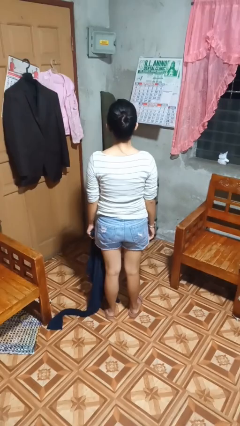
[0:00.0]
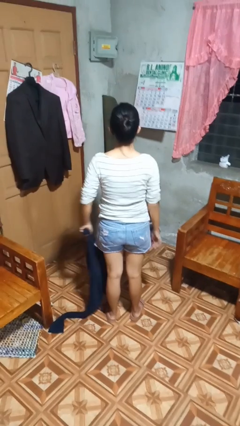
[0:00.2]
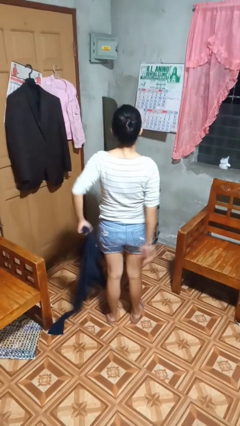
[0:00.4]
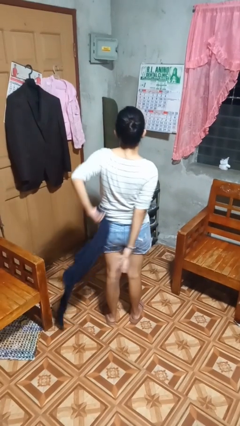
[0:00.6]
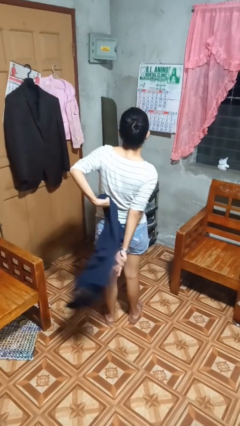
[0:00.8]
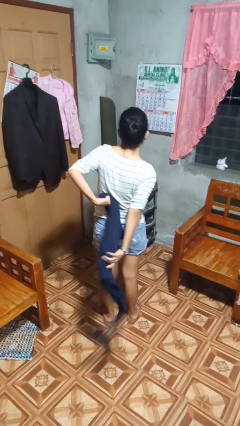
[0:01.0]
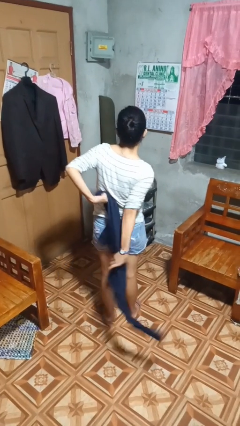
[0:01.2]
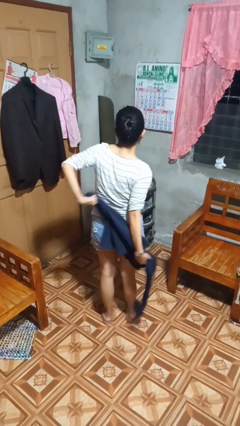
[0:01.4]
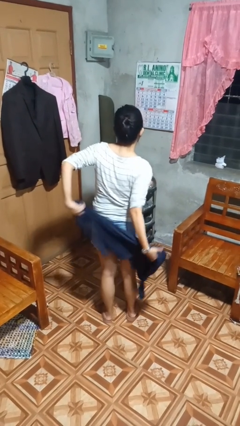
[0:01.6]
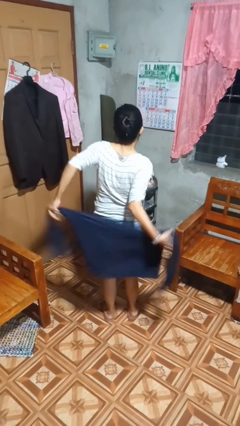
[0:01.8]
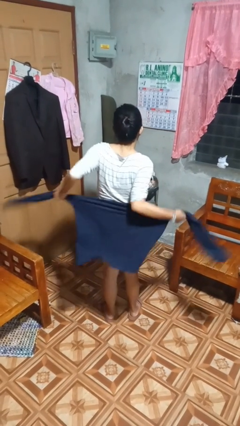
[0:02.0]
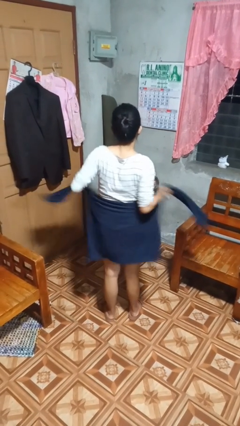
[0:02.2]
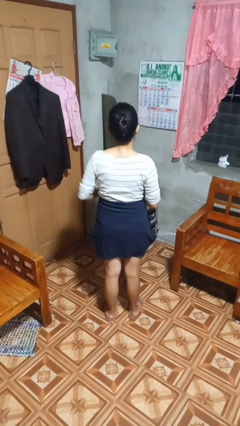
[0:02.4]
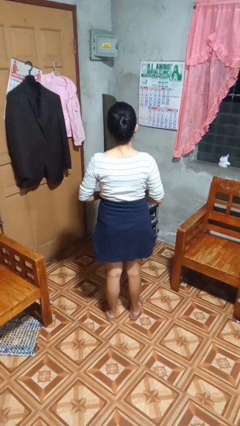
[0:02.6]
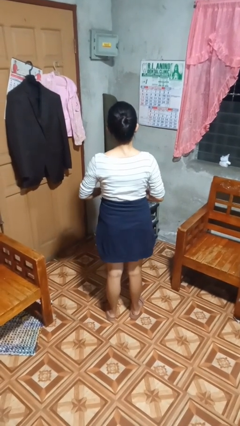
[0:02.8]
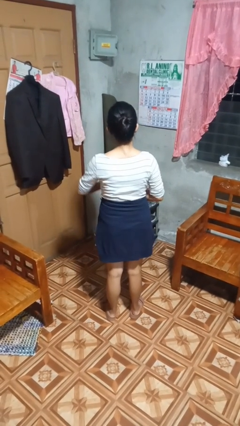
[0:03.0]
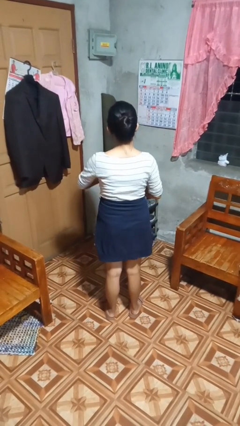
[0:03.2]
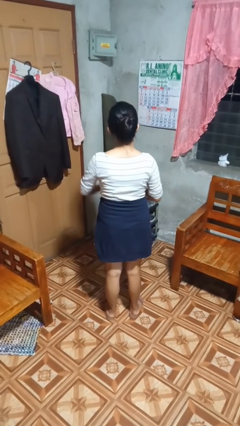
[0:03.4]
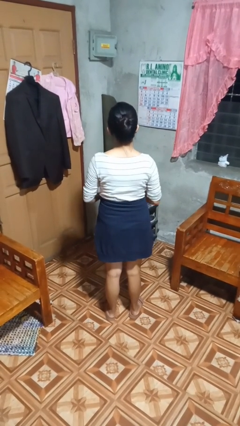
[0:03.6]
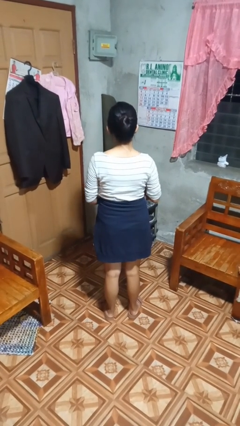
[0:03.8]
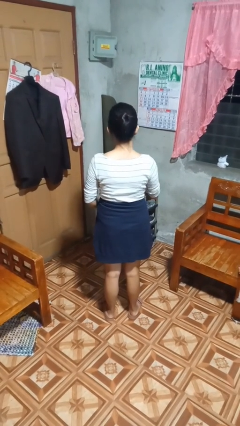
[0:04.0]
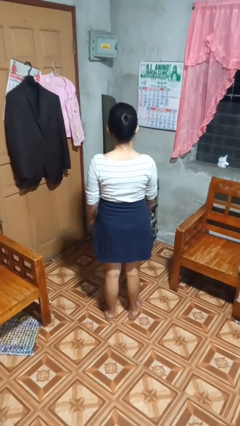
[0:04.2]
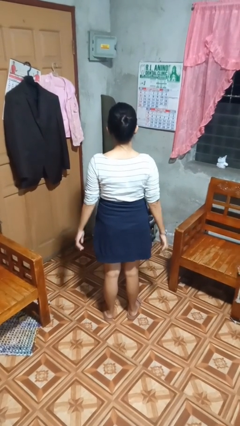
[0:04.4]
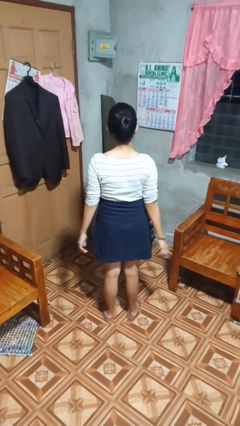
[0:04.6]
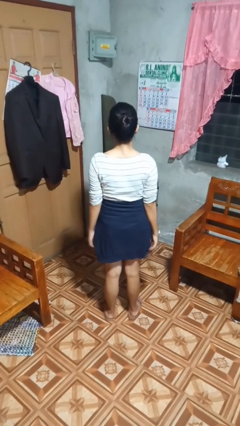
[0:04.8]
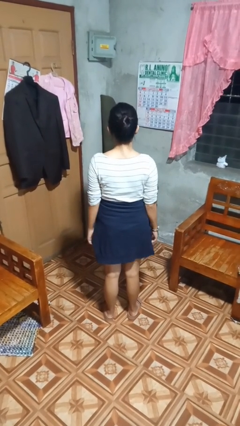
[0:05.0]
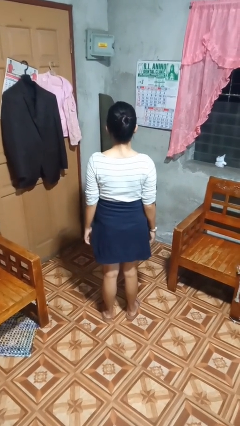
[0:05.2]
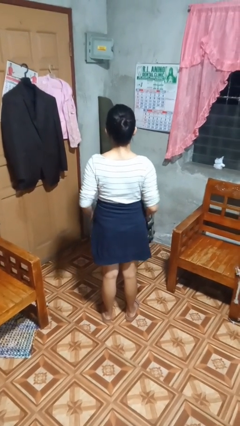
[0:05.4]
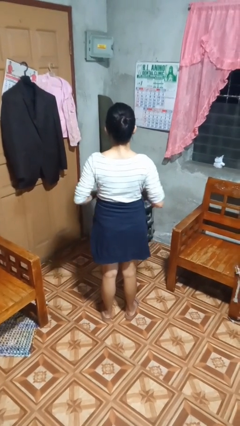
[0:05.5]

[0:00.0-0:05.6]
person ties jacket around waist

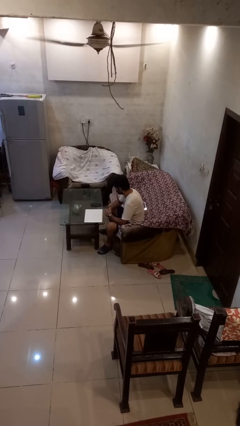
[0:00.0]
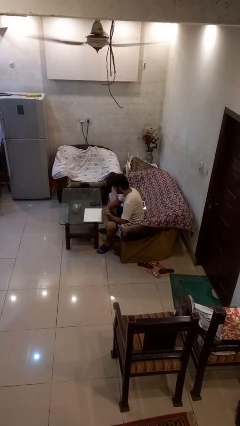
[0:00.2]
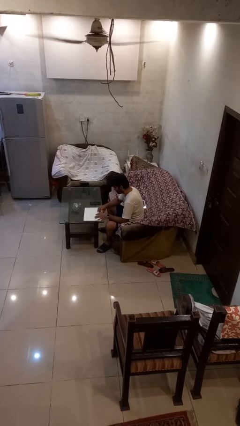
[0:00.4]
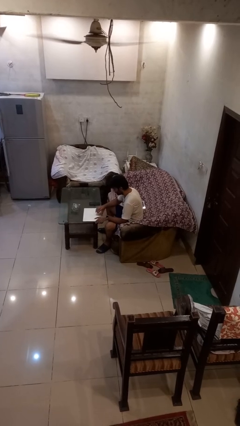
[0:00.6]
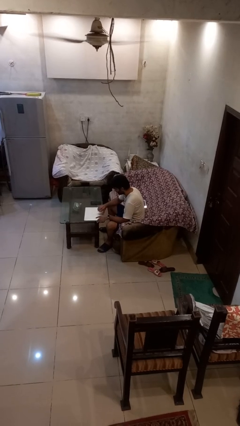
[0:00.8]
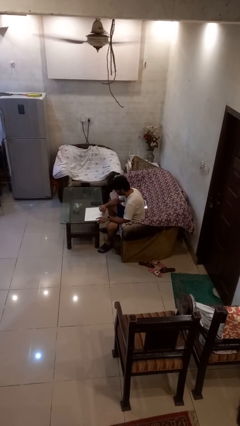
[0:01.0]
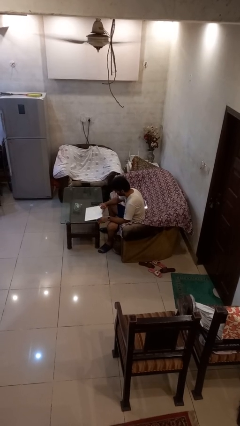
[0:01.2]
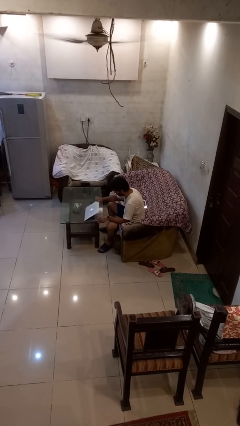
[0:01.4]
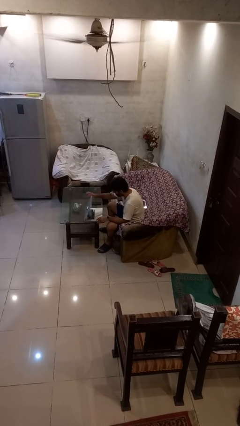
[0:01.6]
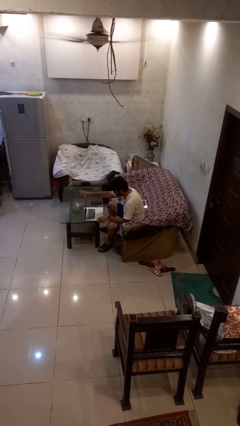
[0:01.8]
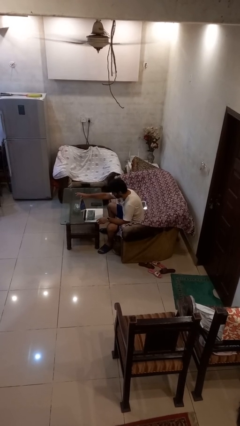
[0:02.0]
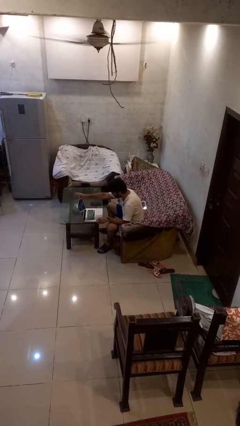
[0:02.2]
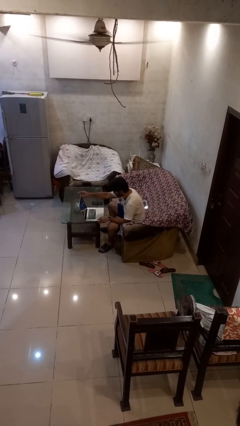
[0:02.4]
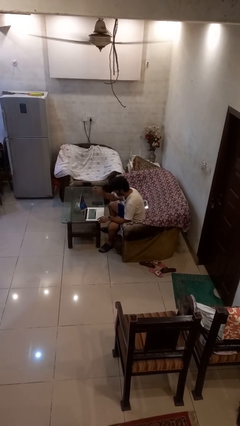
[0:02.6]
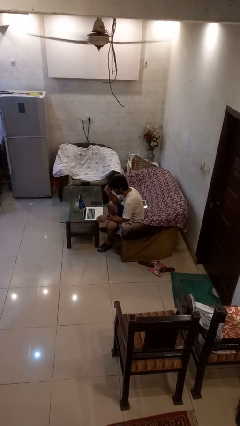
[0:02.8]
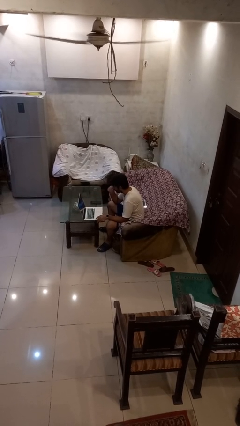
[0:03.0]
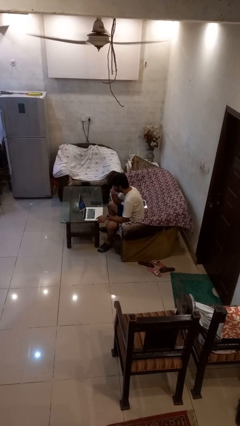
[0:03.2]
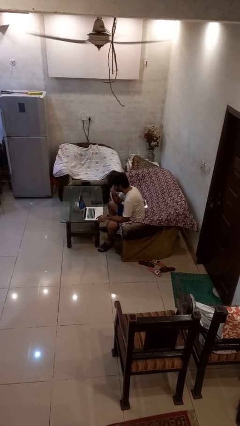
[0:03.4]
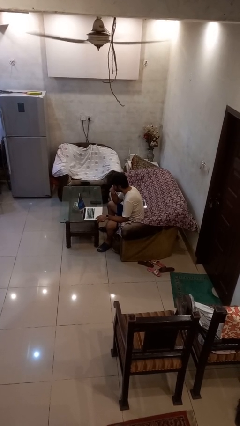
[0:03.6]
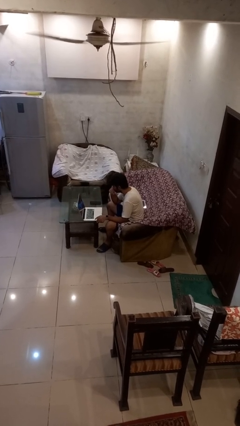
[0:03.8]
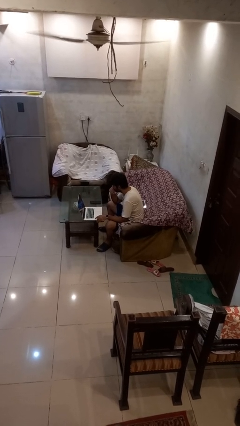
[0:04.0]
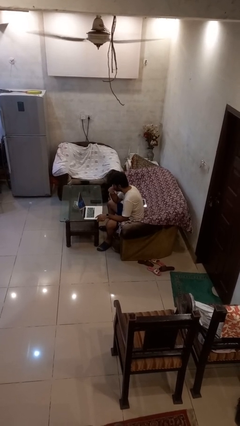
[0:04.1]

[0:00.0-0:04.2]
person opens laptop

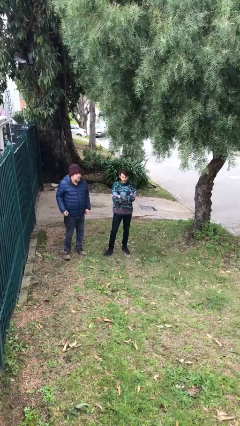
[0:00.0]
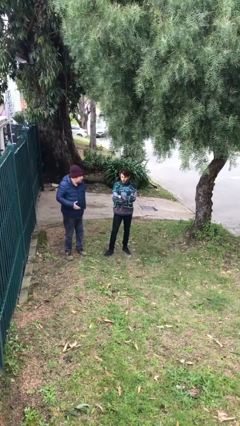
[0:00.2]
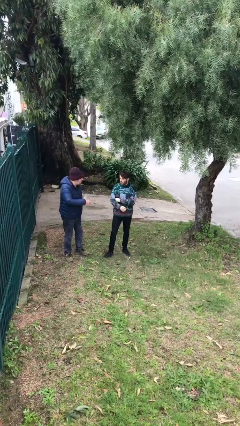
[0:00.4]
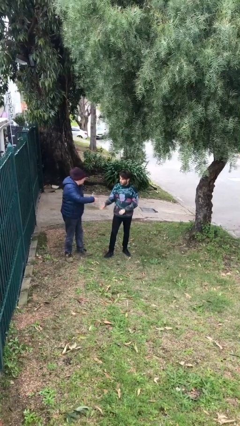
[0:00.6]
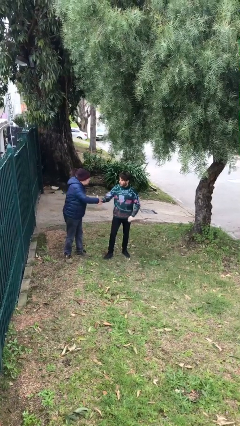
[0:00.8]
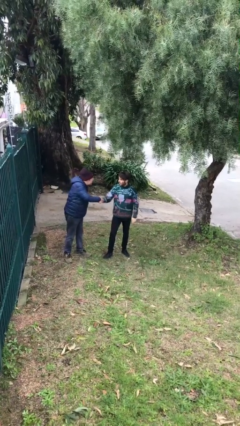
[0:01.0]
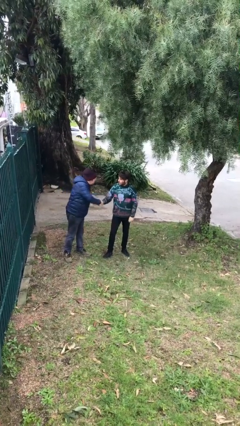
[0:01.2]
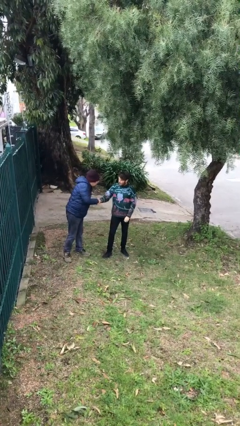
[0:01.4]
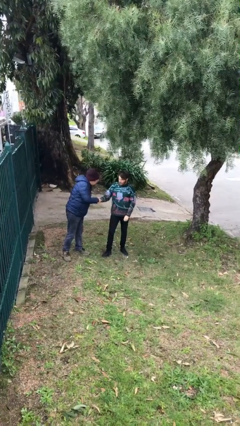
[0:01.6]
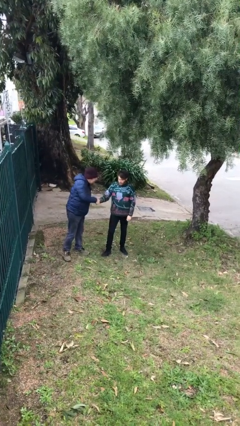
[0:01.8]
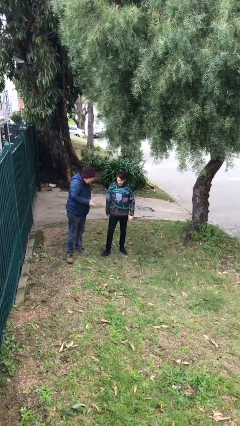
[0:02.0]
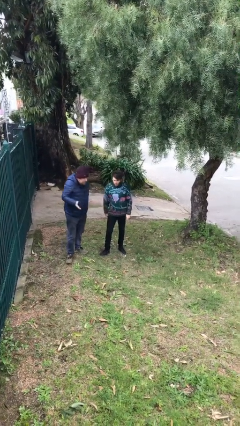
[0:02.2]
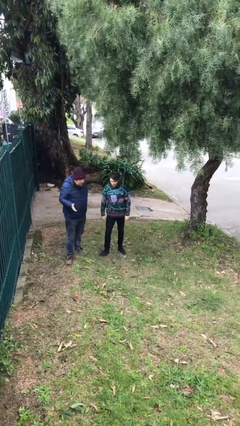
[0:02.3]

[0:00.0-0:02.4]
person shakes hand

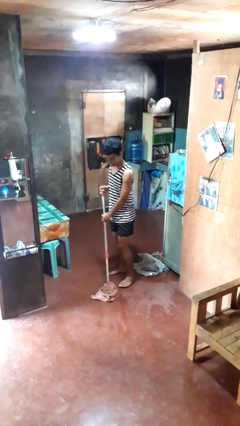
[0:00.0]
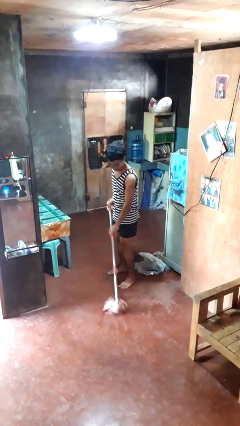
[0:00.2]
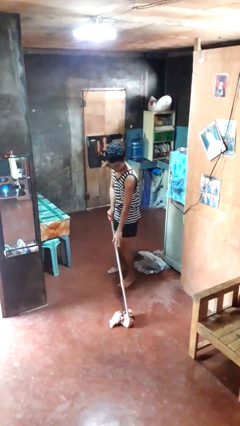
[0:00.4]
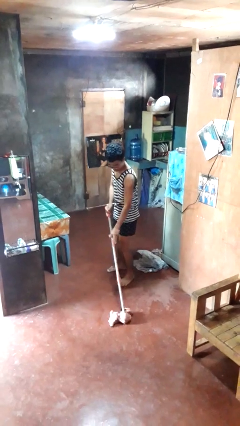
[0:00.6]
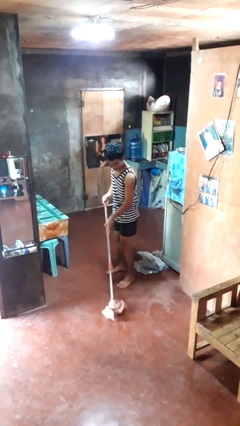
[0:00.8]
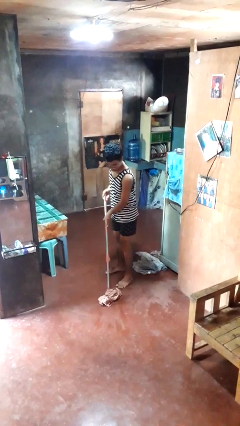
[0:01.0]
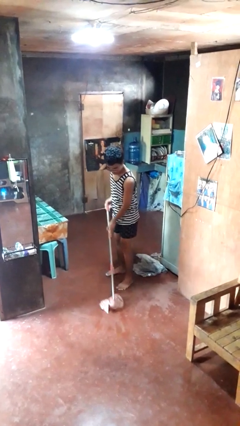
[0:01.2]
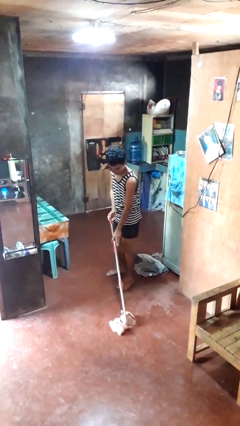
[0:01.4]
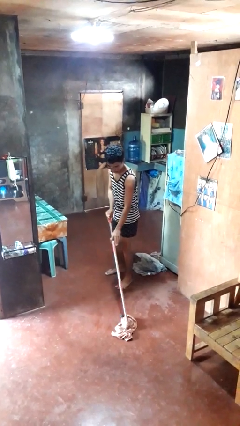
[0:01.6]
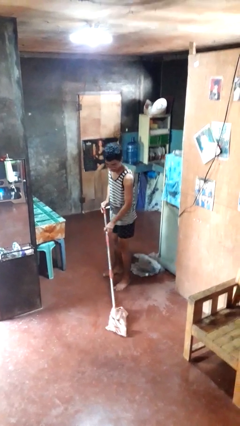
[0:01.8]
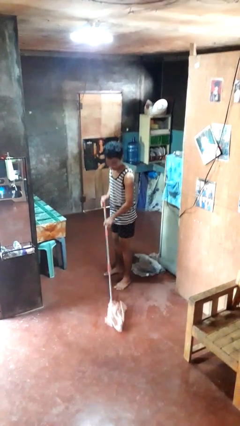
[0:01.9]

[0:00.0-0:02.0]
person mops

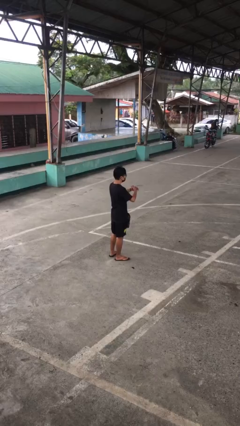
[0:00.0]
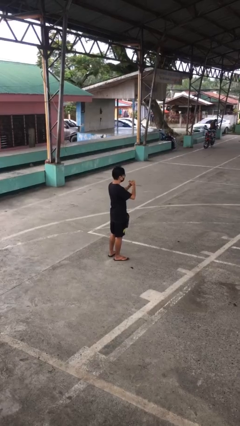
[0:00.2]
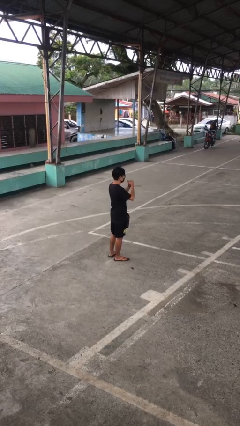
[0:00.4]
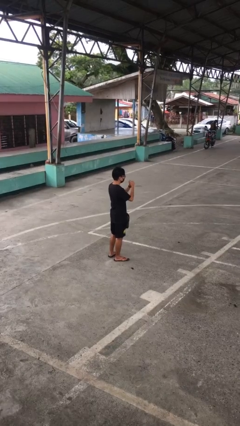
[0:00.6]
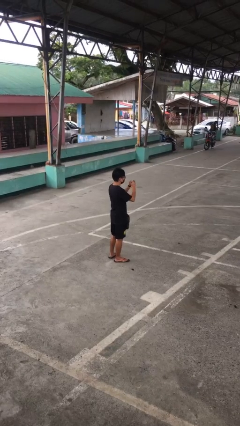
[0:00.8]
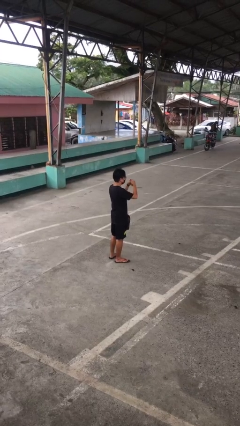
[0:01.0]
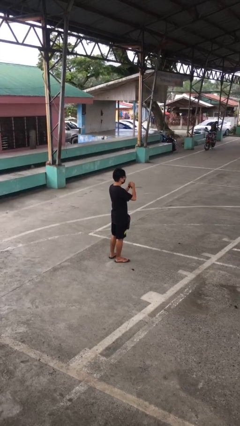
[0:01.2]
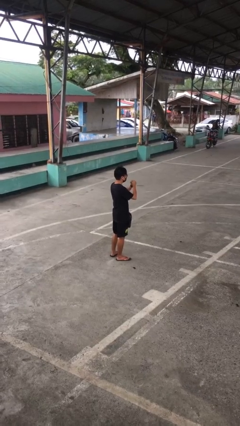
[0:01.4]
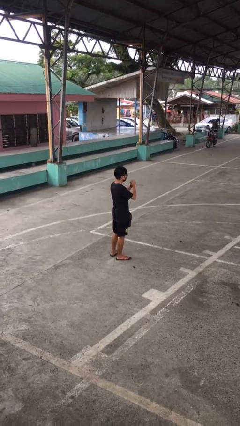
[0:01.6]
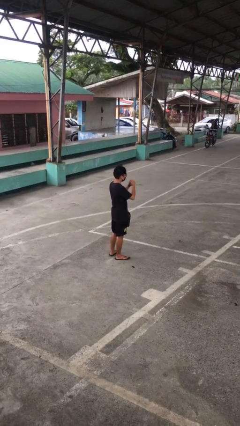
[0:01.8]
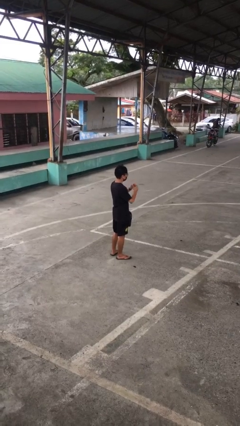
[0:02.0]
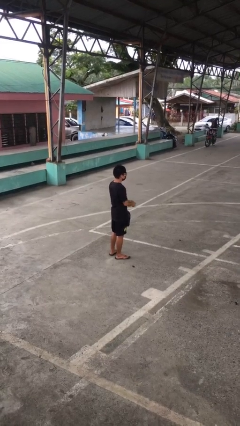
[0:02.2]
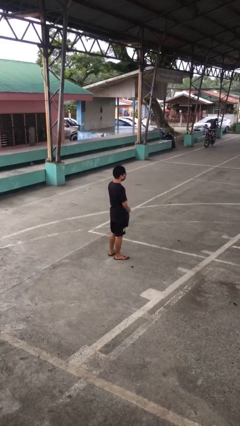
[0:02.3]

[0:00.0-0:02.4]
person cracks knuckles

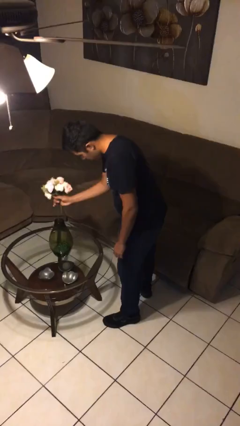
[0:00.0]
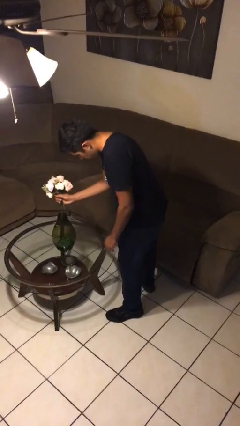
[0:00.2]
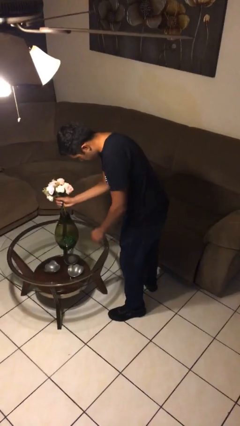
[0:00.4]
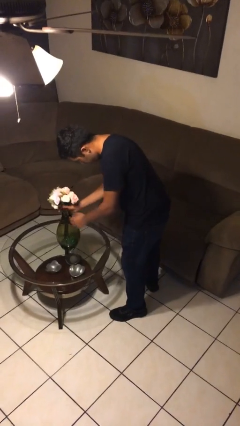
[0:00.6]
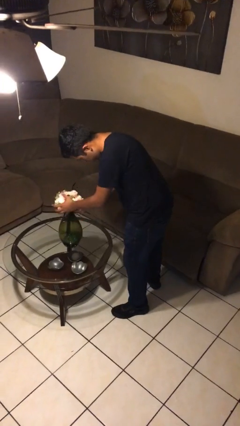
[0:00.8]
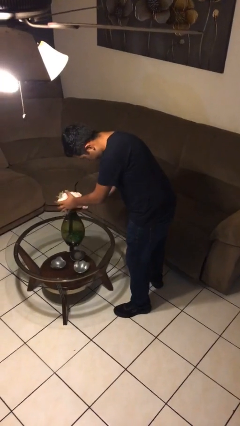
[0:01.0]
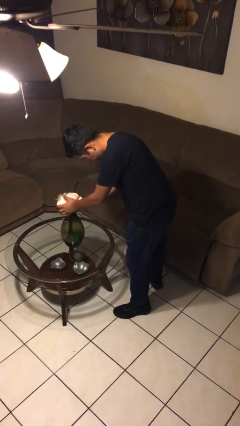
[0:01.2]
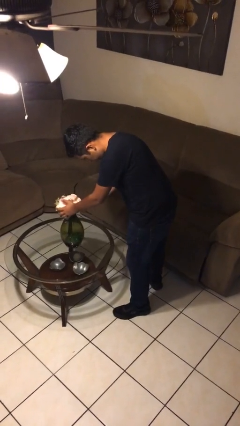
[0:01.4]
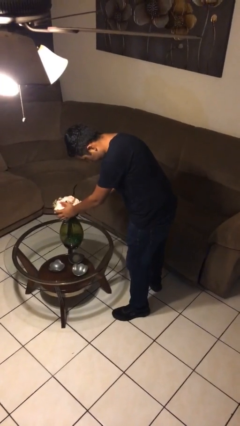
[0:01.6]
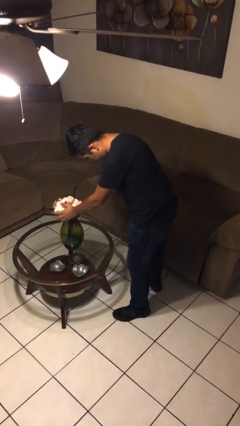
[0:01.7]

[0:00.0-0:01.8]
person arranges flowers in vase
